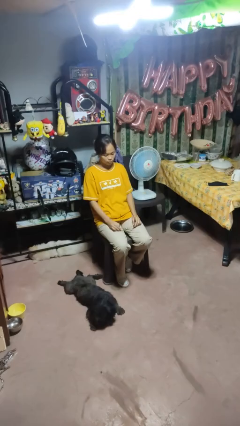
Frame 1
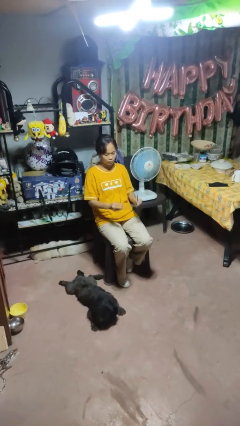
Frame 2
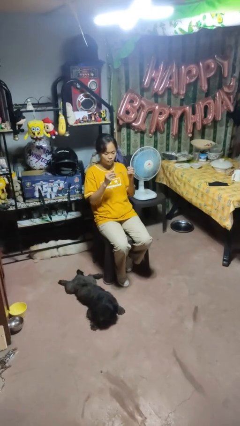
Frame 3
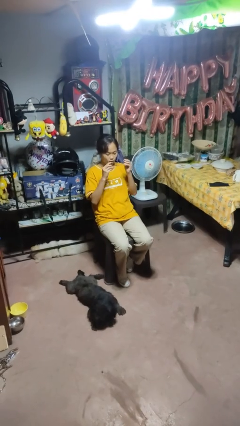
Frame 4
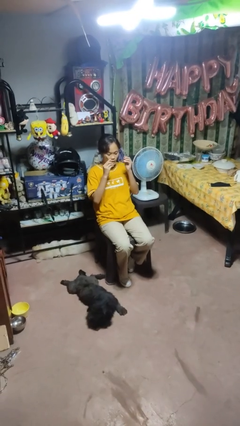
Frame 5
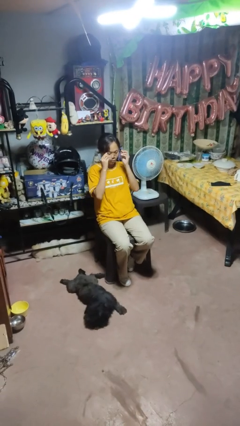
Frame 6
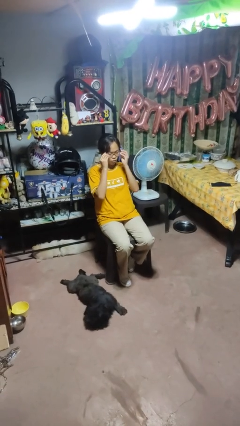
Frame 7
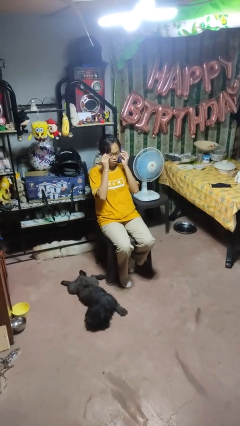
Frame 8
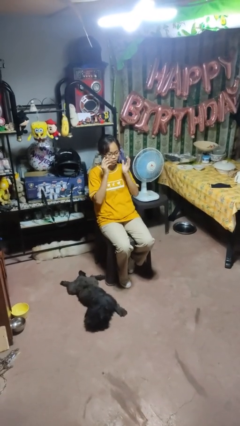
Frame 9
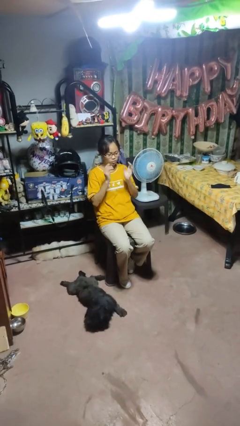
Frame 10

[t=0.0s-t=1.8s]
person puts on glasses

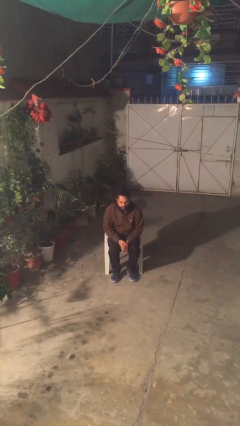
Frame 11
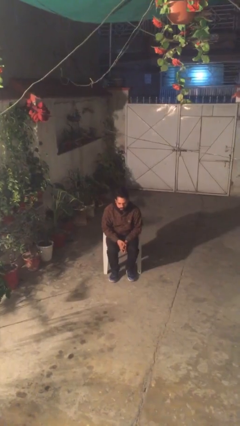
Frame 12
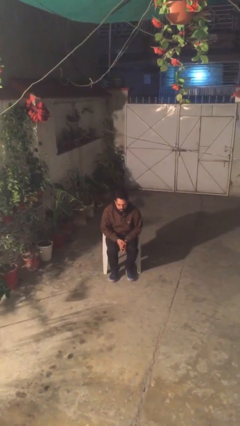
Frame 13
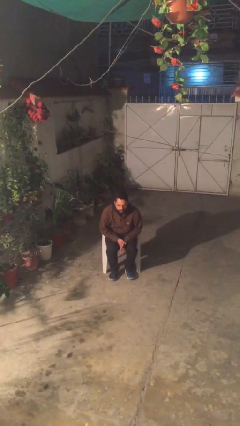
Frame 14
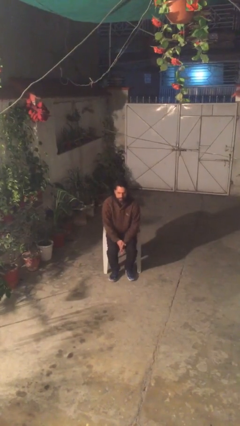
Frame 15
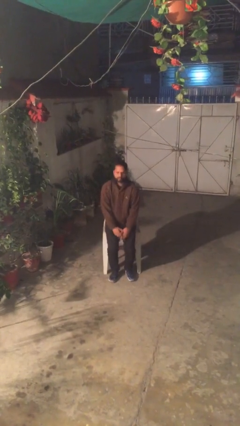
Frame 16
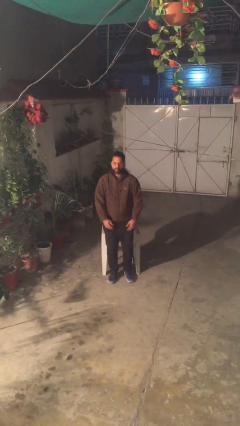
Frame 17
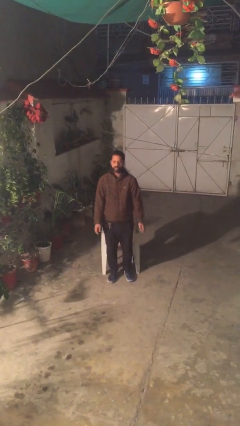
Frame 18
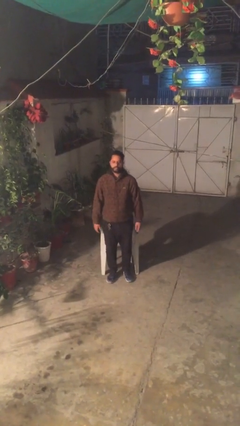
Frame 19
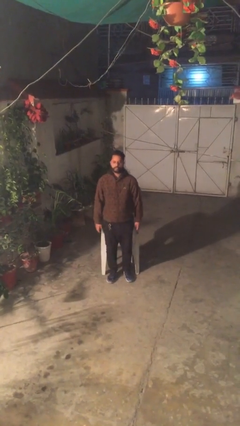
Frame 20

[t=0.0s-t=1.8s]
person stands up

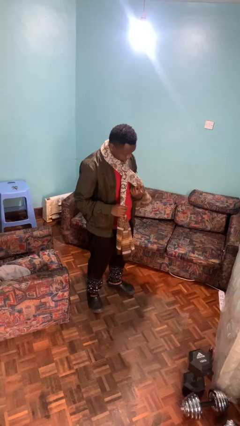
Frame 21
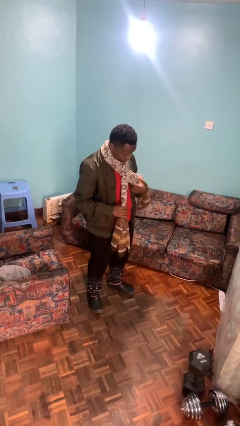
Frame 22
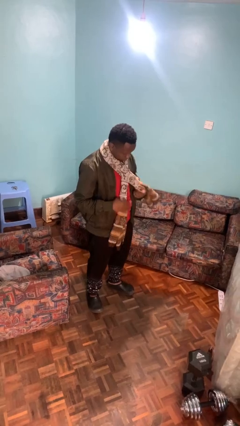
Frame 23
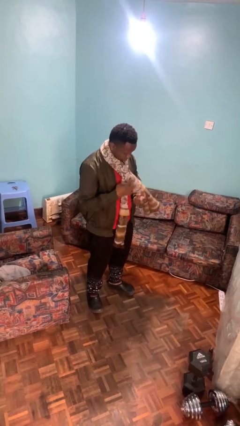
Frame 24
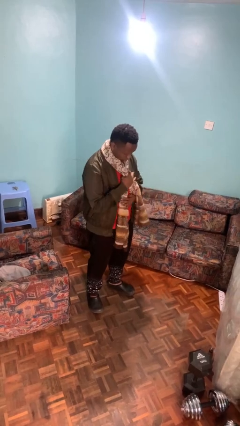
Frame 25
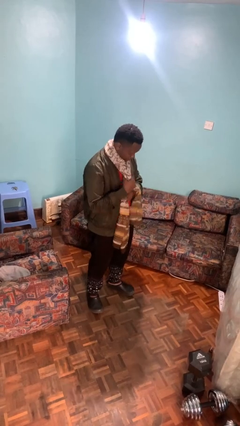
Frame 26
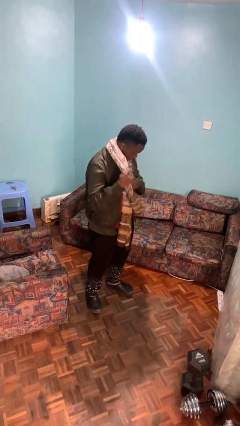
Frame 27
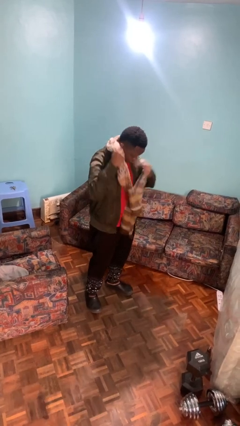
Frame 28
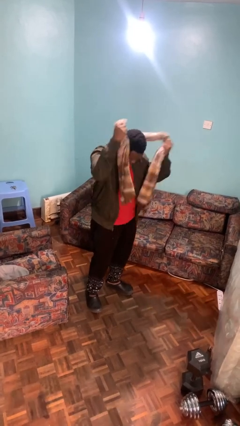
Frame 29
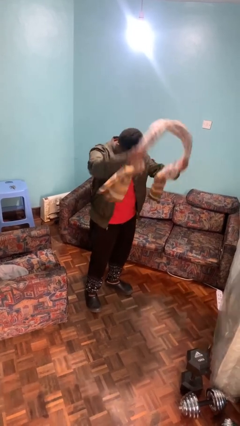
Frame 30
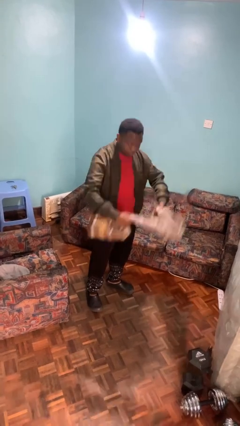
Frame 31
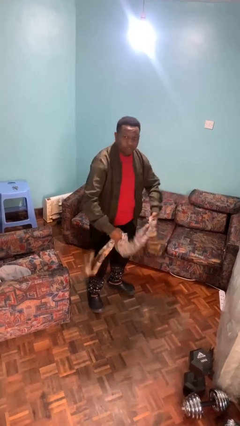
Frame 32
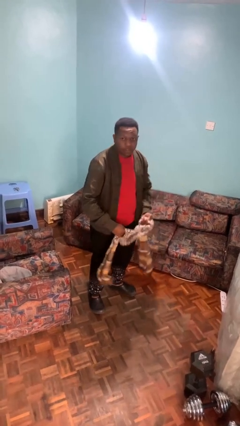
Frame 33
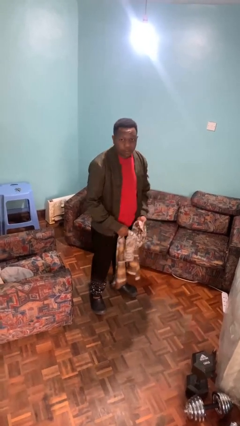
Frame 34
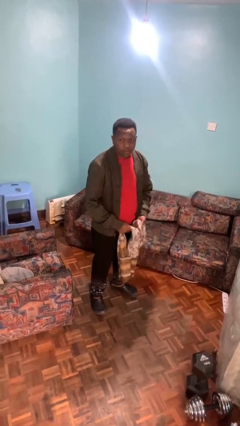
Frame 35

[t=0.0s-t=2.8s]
person takes off scarf

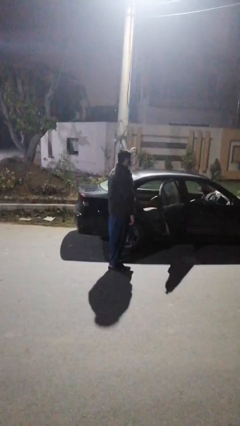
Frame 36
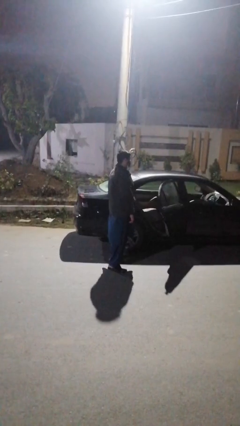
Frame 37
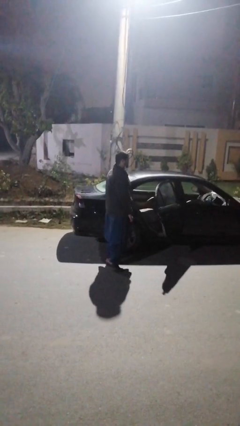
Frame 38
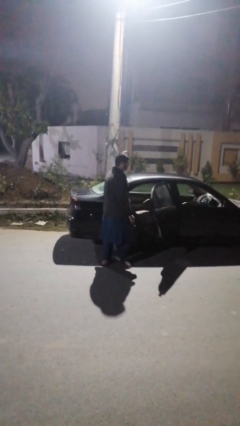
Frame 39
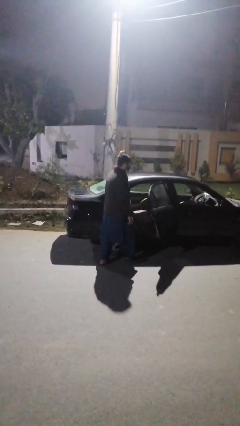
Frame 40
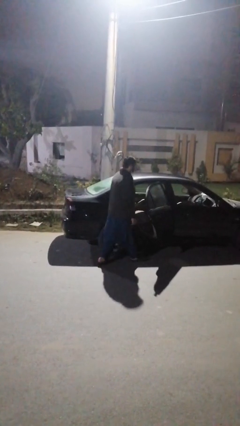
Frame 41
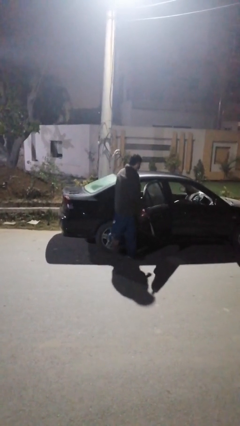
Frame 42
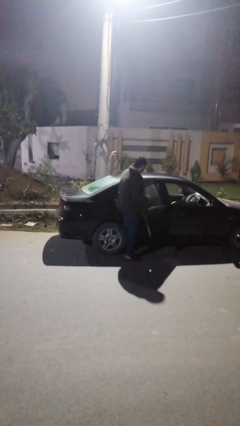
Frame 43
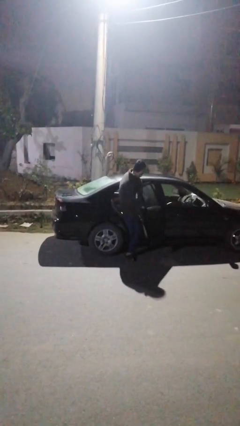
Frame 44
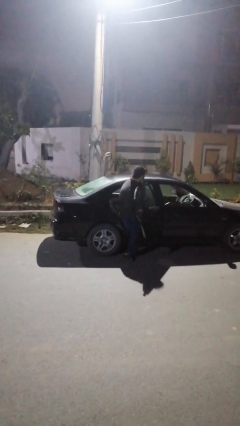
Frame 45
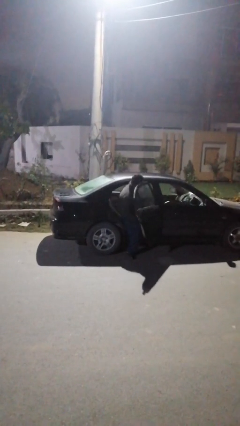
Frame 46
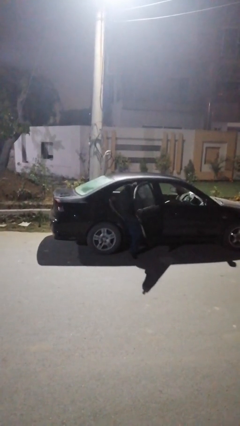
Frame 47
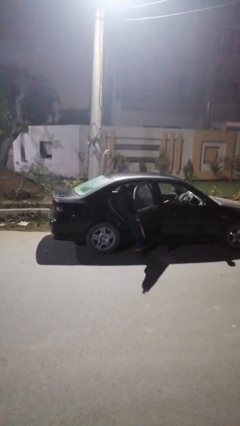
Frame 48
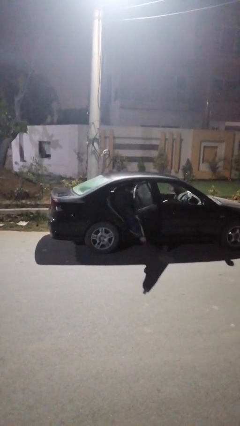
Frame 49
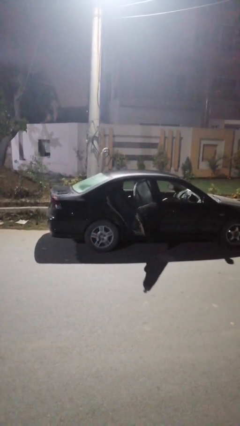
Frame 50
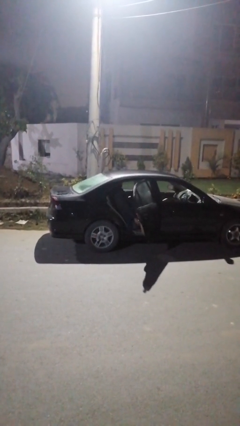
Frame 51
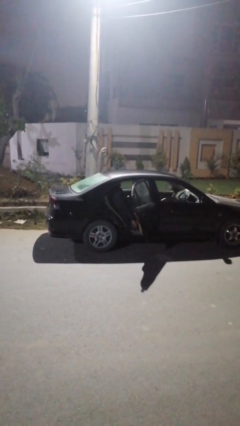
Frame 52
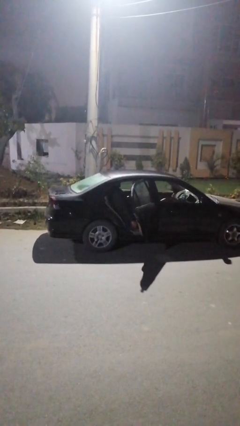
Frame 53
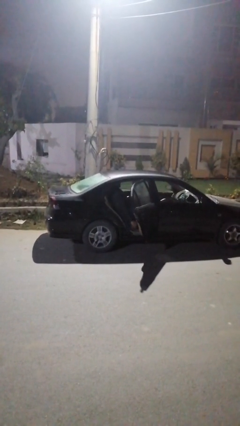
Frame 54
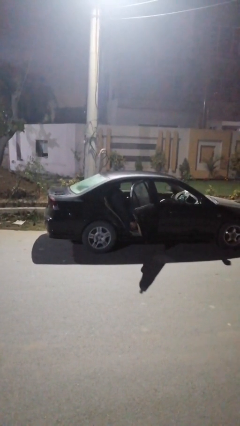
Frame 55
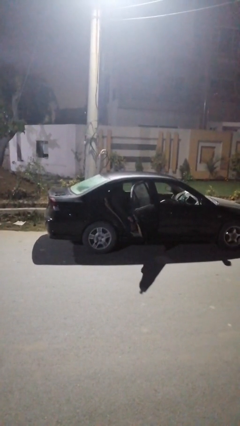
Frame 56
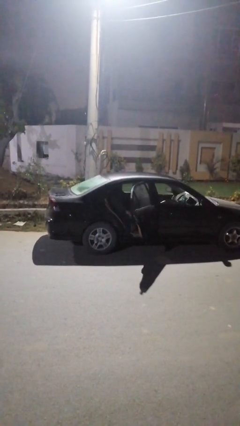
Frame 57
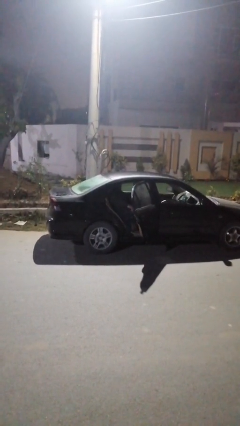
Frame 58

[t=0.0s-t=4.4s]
person enters car

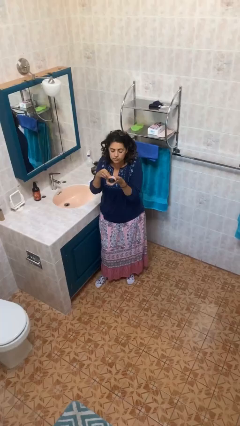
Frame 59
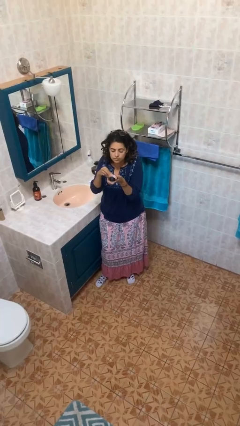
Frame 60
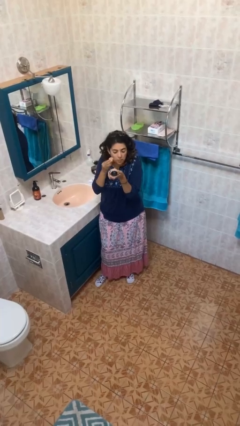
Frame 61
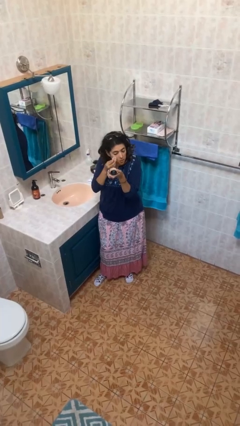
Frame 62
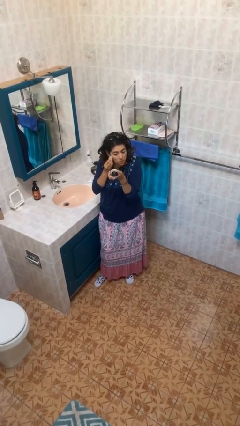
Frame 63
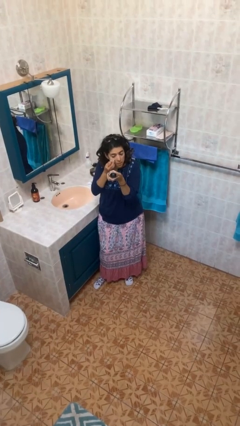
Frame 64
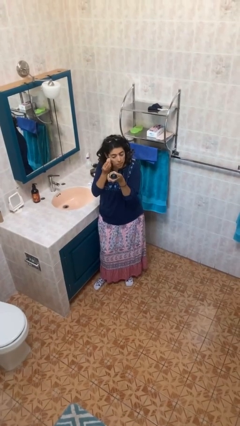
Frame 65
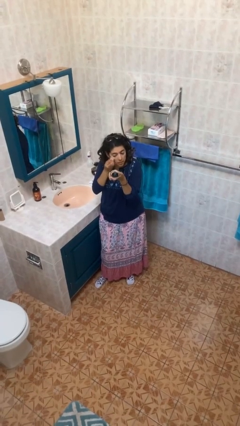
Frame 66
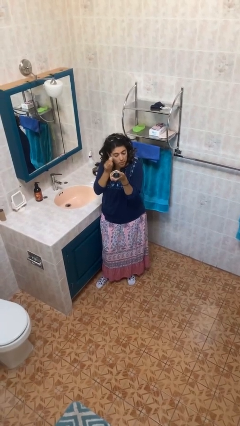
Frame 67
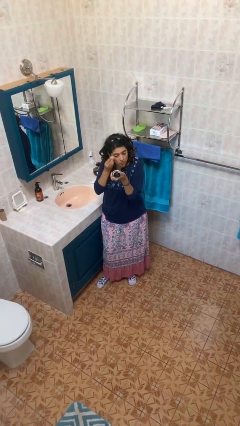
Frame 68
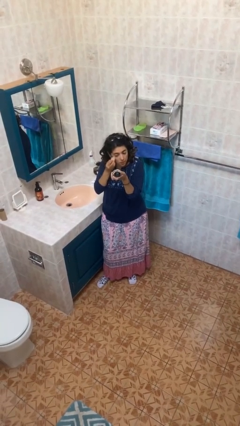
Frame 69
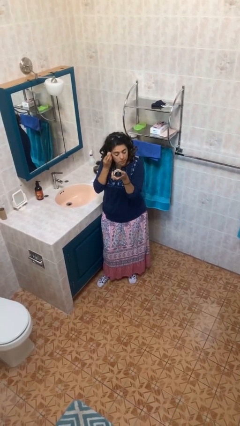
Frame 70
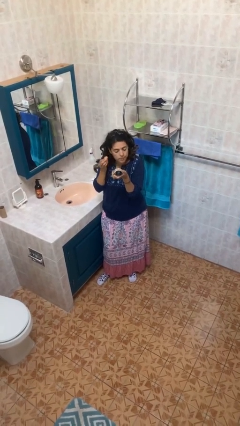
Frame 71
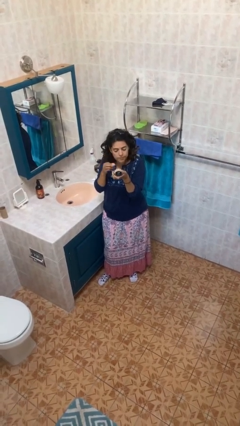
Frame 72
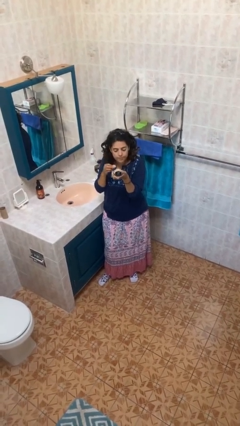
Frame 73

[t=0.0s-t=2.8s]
person applies foundation makeup

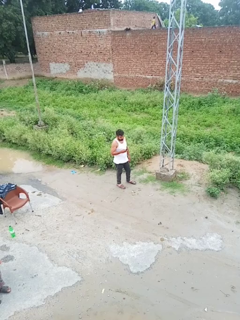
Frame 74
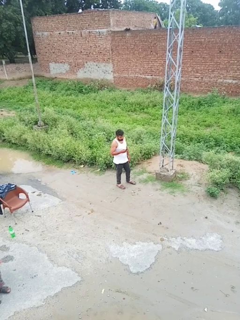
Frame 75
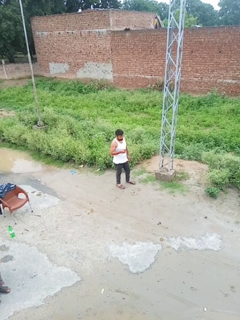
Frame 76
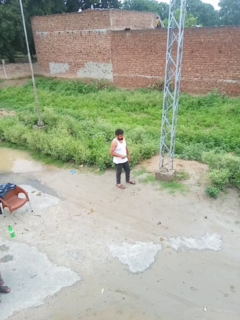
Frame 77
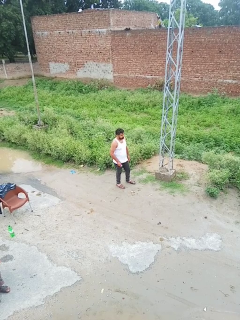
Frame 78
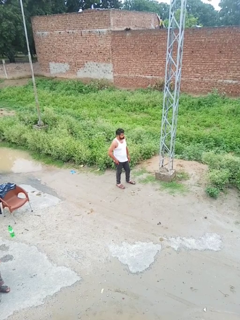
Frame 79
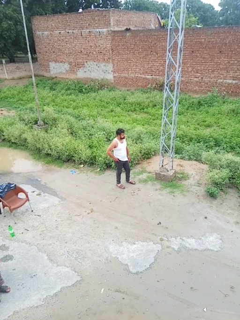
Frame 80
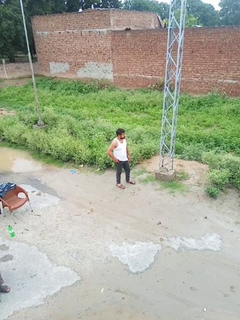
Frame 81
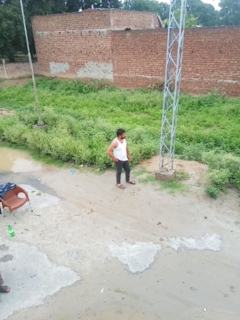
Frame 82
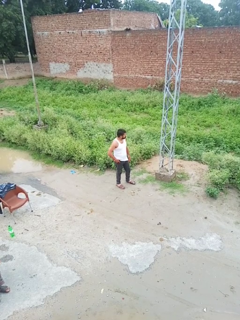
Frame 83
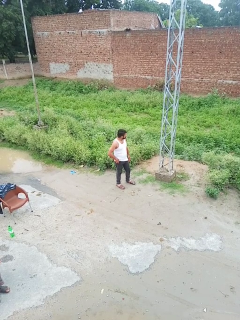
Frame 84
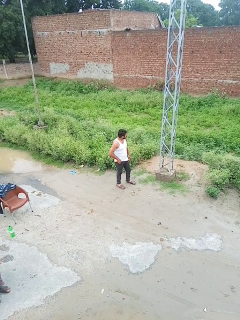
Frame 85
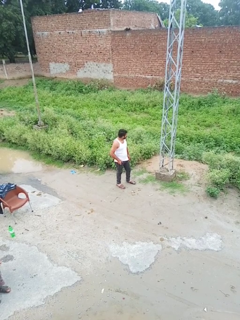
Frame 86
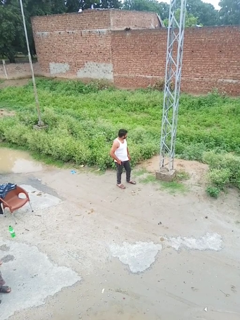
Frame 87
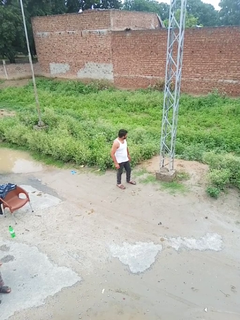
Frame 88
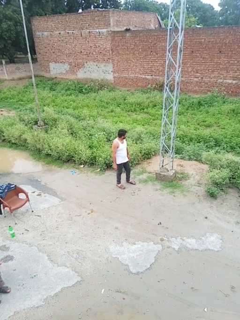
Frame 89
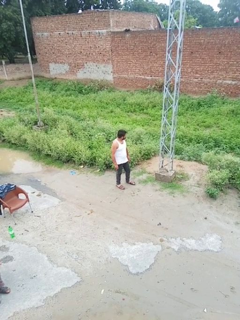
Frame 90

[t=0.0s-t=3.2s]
person puts phone into pocket

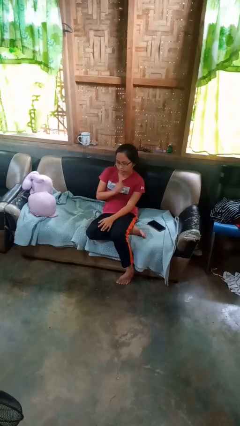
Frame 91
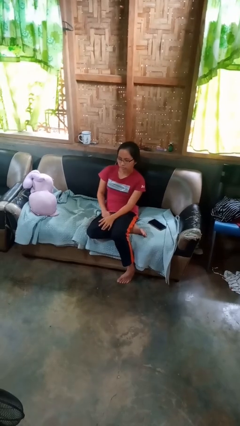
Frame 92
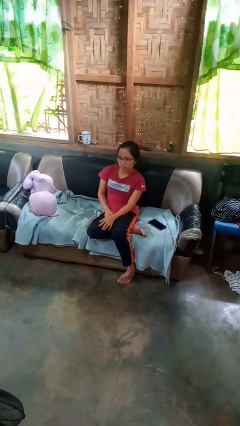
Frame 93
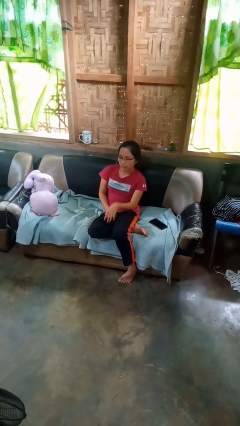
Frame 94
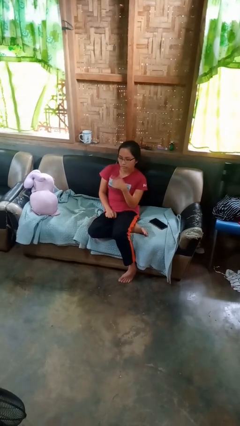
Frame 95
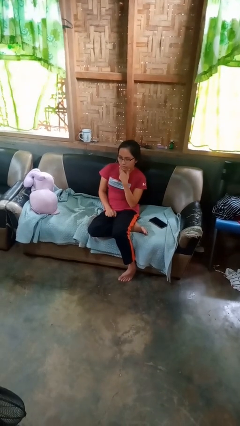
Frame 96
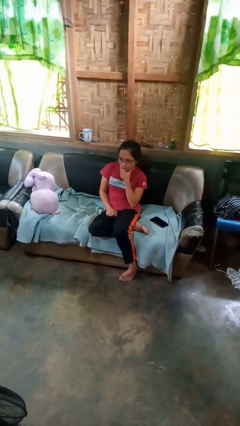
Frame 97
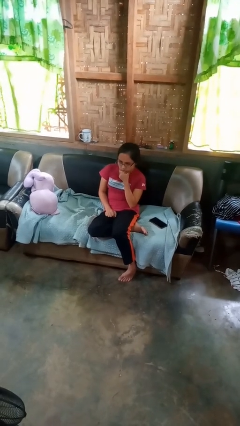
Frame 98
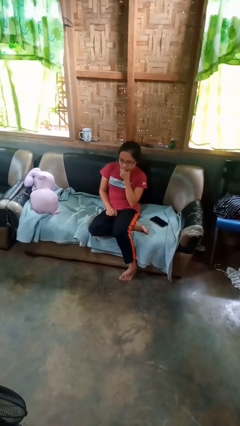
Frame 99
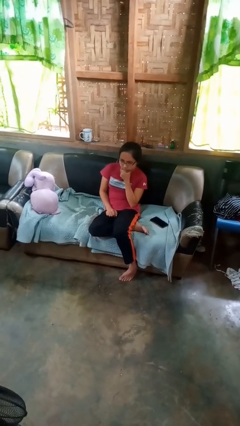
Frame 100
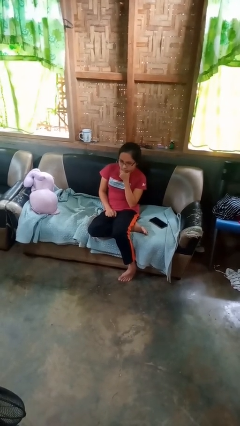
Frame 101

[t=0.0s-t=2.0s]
person strokes chin
